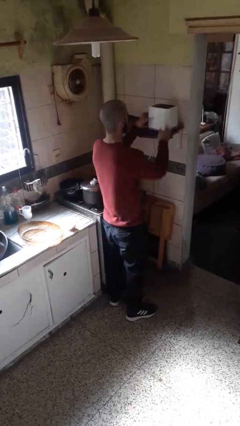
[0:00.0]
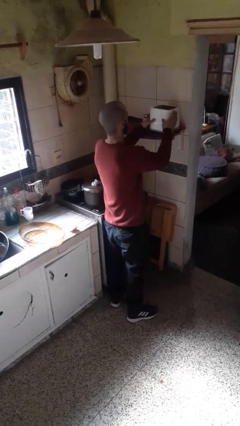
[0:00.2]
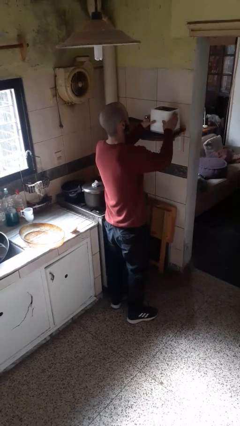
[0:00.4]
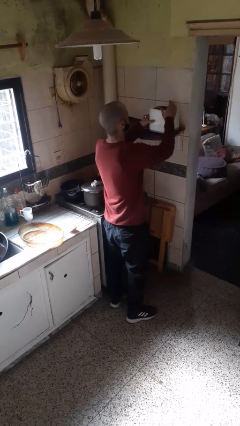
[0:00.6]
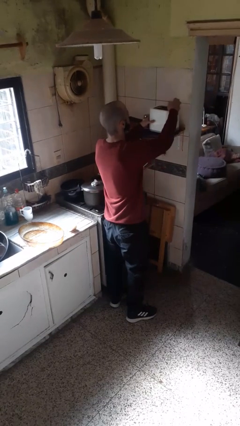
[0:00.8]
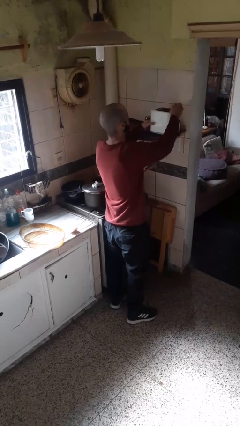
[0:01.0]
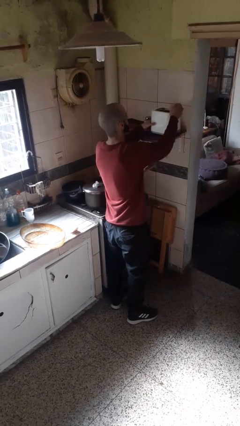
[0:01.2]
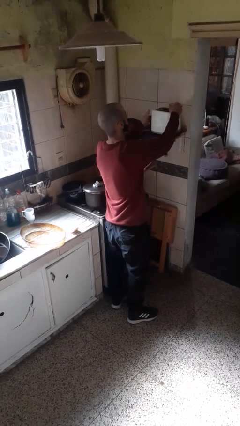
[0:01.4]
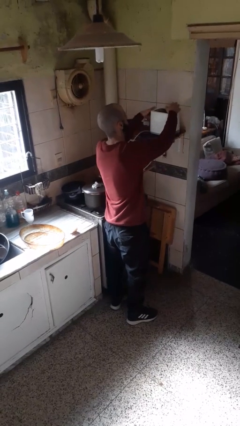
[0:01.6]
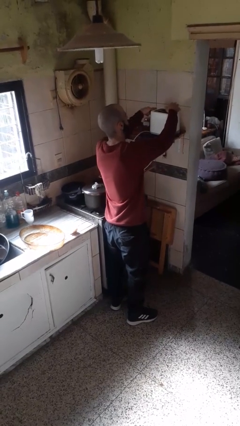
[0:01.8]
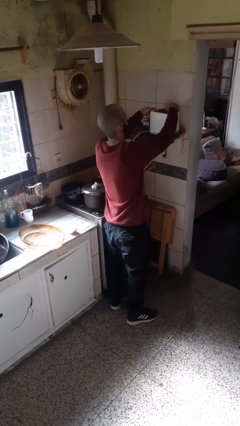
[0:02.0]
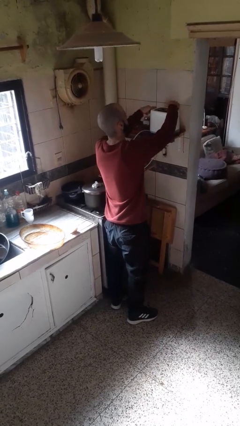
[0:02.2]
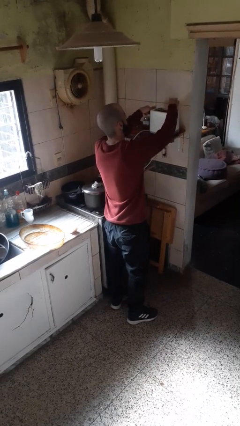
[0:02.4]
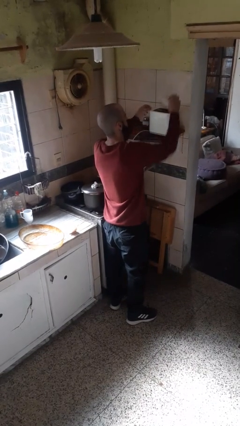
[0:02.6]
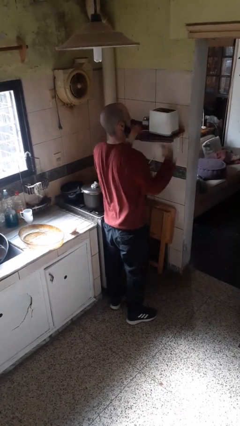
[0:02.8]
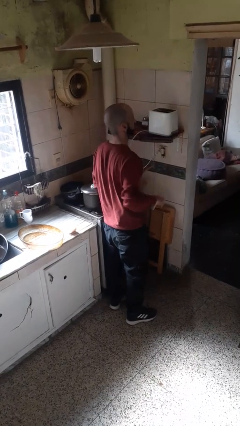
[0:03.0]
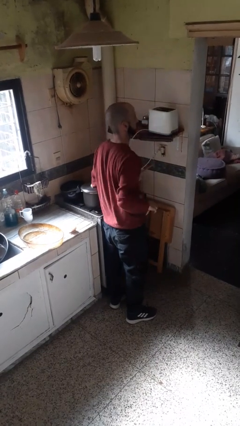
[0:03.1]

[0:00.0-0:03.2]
person takes object from toaster

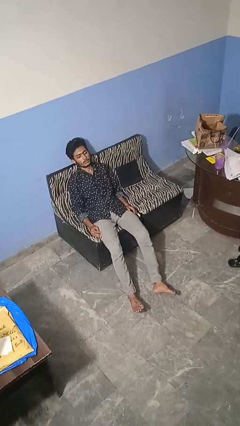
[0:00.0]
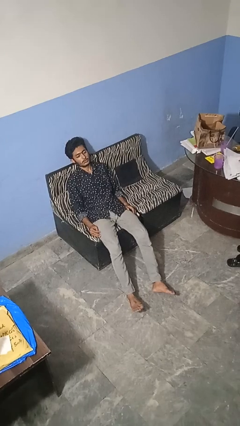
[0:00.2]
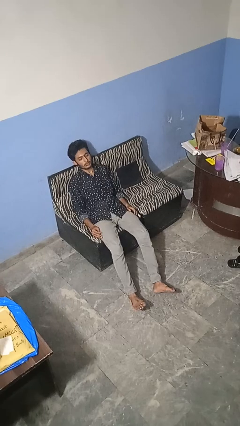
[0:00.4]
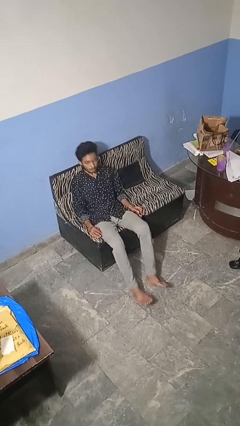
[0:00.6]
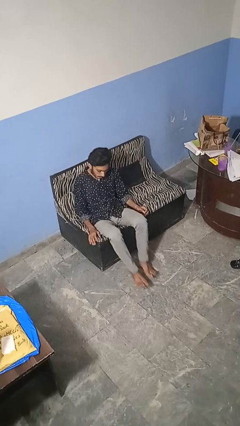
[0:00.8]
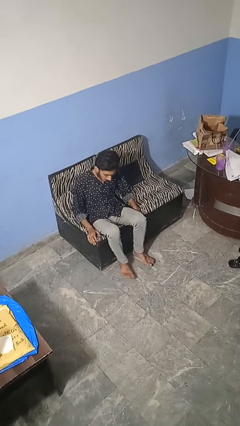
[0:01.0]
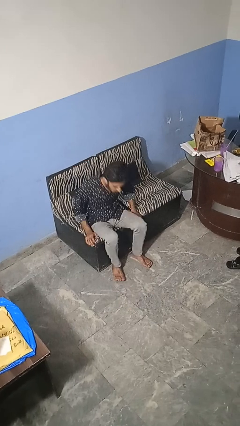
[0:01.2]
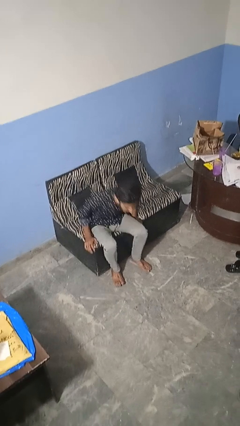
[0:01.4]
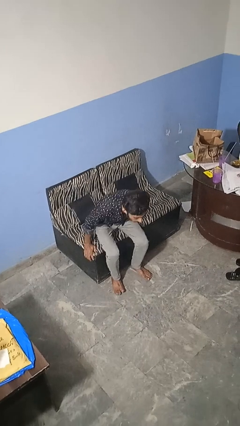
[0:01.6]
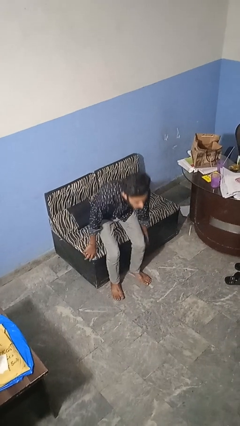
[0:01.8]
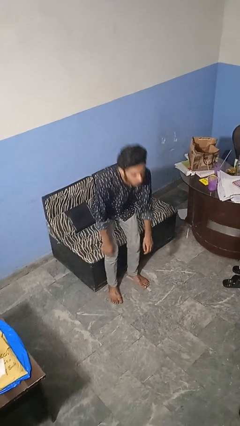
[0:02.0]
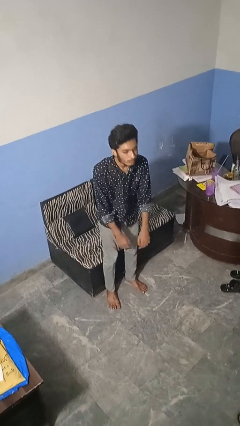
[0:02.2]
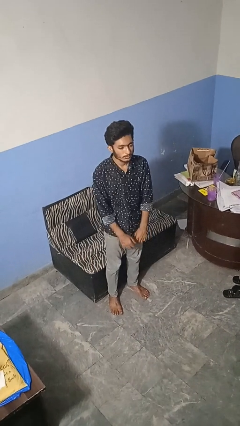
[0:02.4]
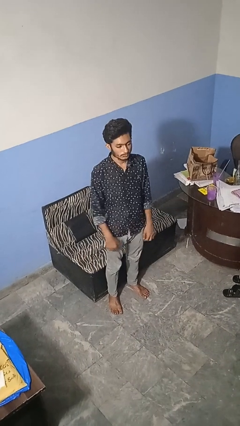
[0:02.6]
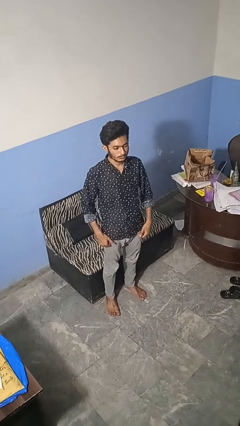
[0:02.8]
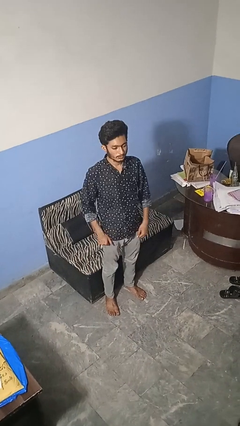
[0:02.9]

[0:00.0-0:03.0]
person stands up

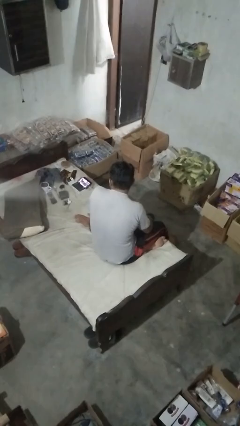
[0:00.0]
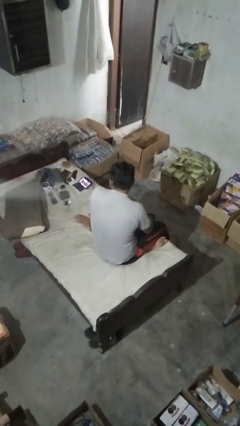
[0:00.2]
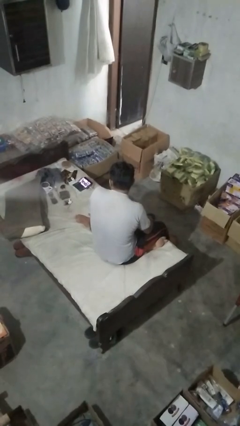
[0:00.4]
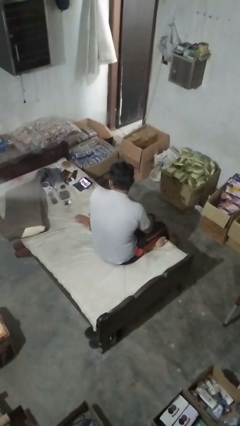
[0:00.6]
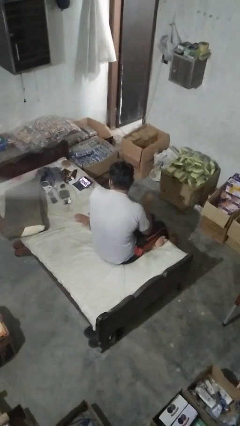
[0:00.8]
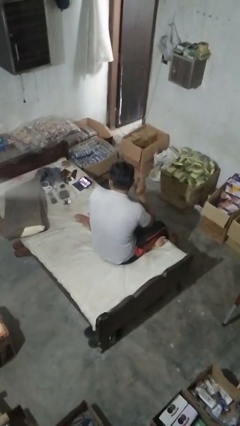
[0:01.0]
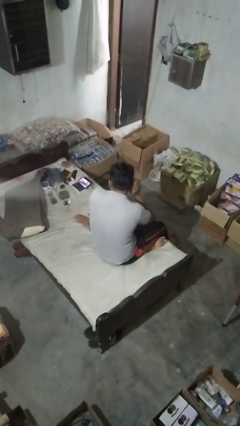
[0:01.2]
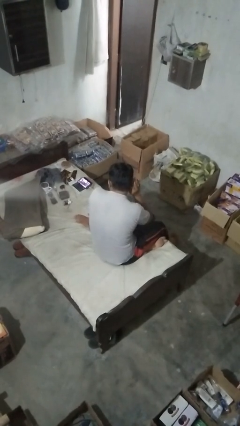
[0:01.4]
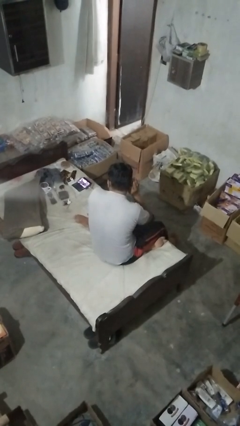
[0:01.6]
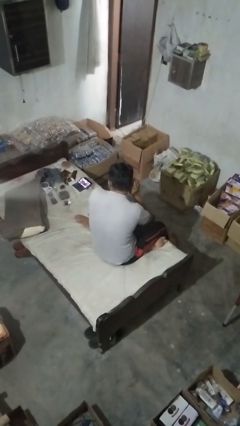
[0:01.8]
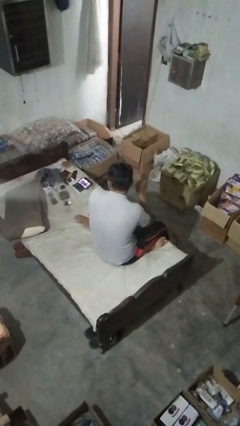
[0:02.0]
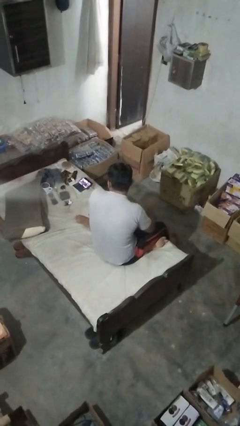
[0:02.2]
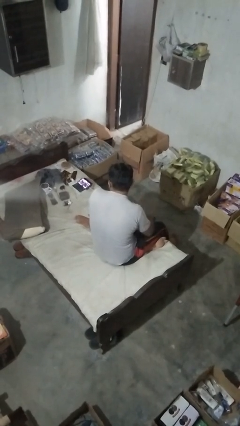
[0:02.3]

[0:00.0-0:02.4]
person gestures listen closely

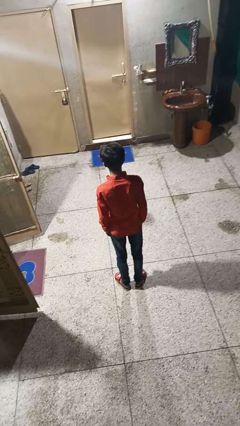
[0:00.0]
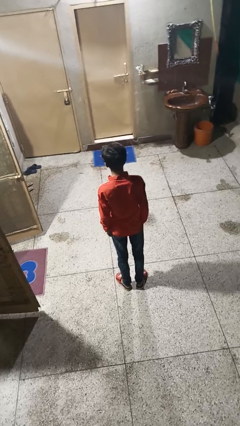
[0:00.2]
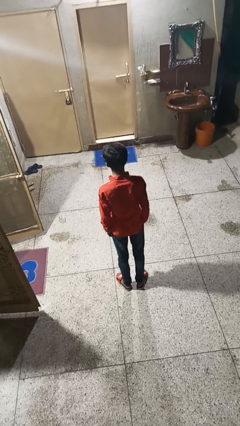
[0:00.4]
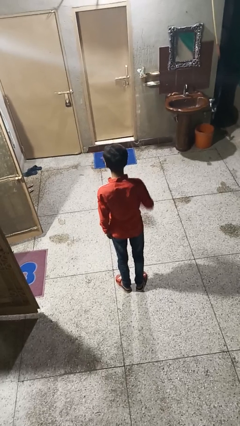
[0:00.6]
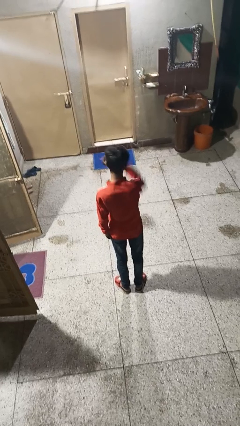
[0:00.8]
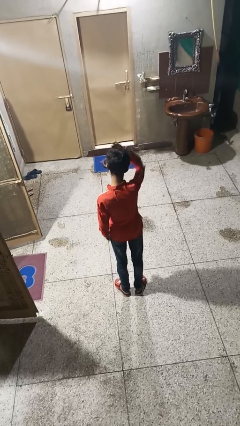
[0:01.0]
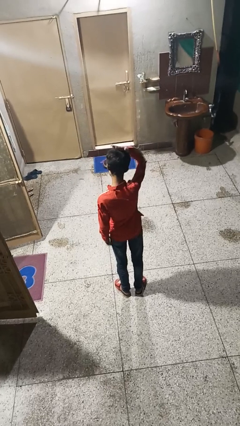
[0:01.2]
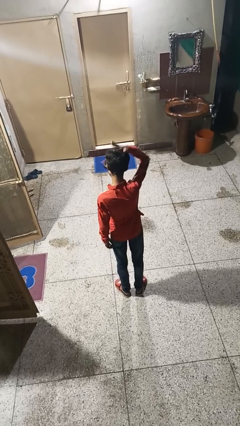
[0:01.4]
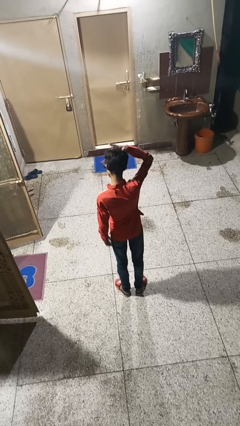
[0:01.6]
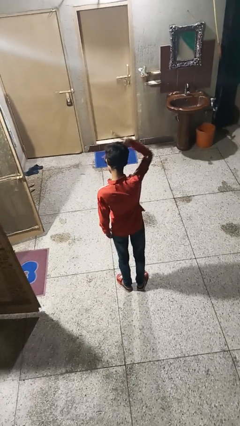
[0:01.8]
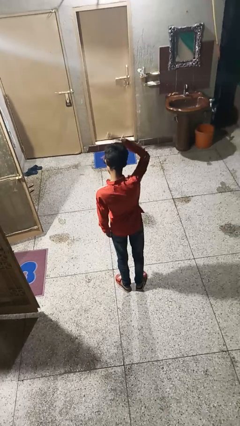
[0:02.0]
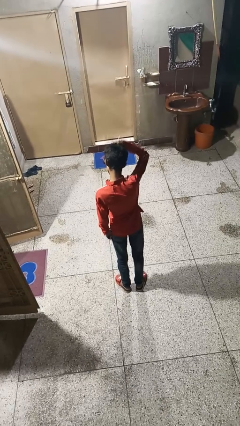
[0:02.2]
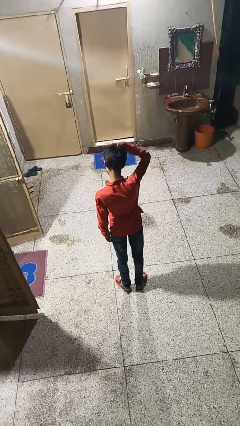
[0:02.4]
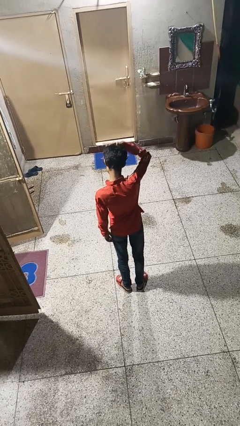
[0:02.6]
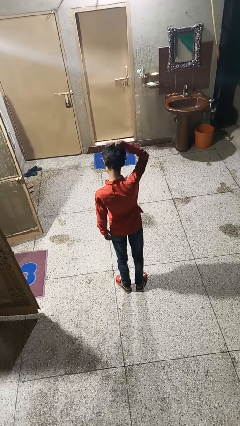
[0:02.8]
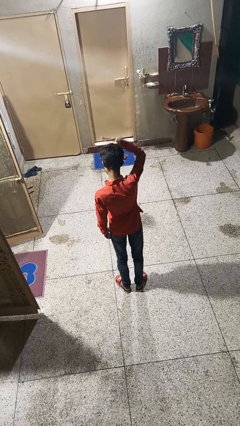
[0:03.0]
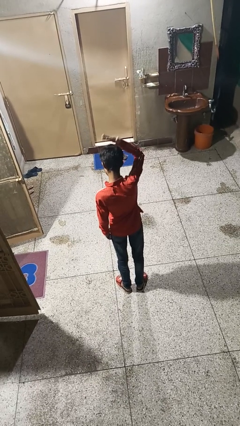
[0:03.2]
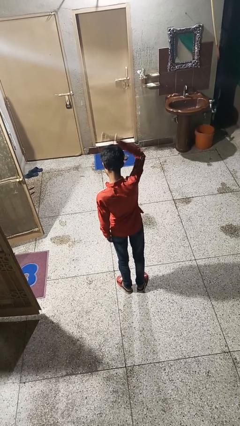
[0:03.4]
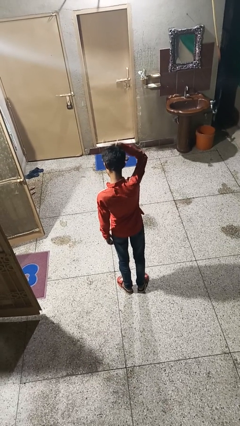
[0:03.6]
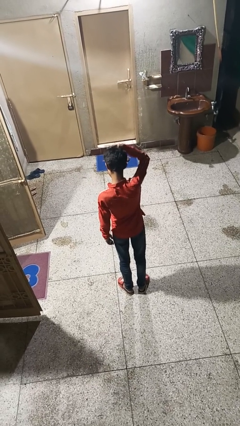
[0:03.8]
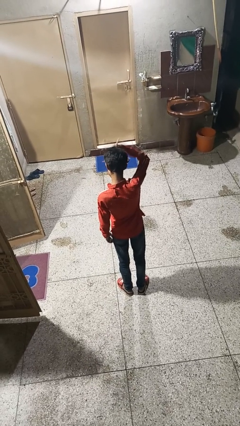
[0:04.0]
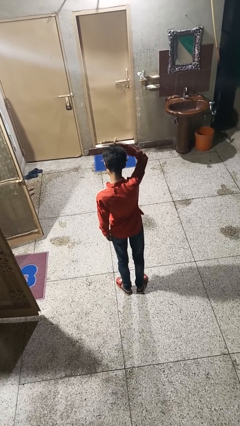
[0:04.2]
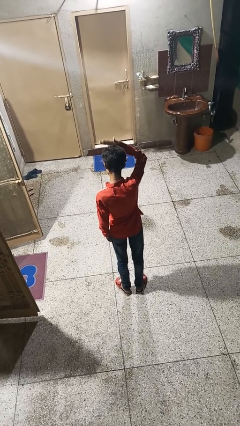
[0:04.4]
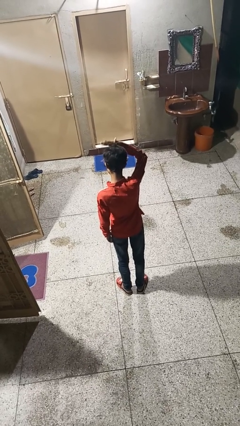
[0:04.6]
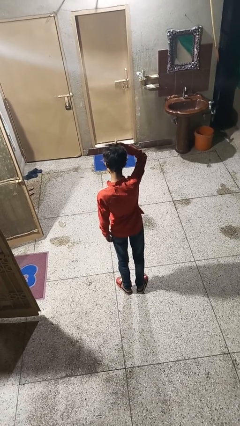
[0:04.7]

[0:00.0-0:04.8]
person pats head

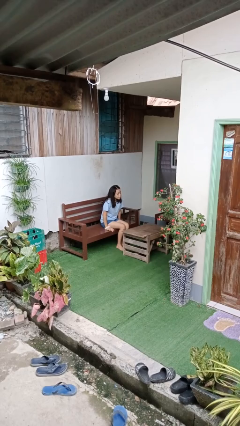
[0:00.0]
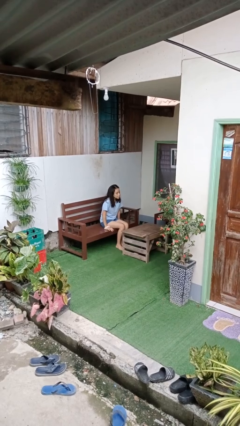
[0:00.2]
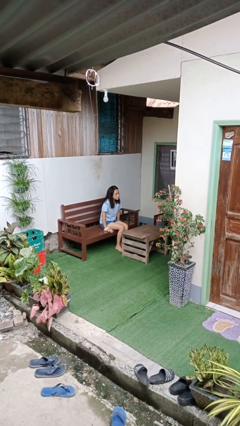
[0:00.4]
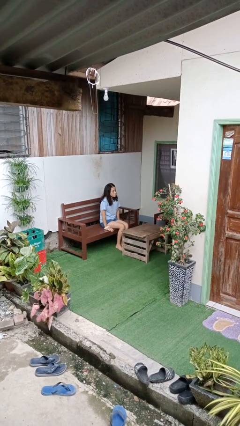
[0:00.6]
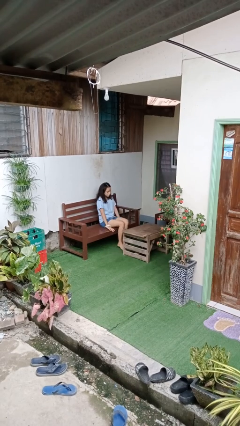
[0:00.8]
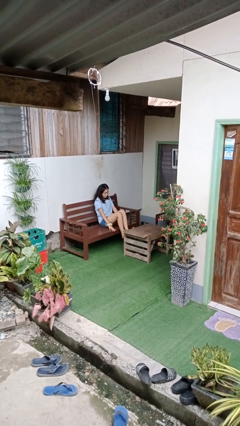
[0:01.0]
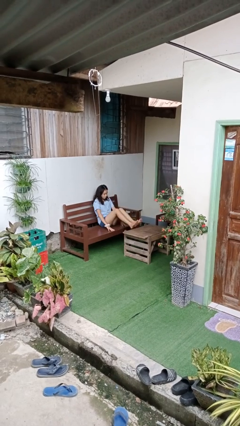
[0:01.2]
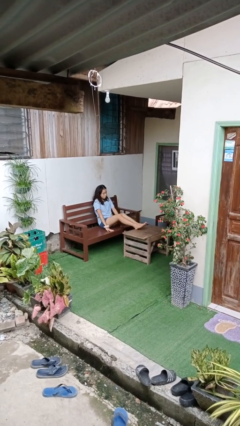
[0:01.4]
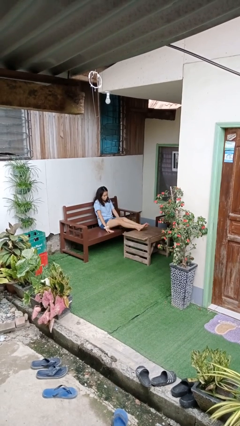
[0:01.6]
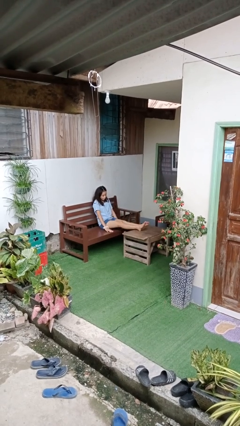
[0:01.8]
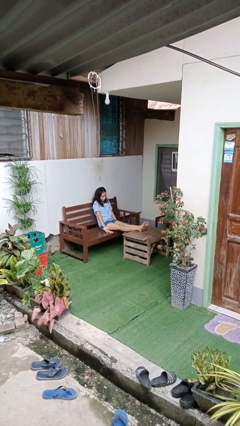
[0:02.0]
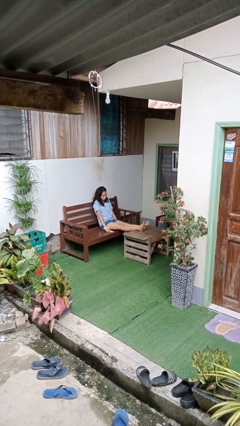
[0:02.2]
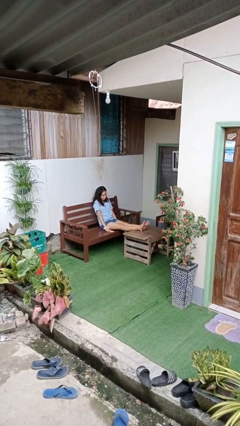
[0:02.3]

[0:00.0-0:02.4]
person puts feet up

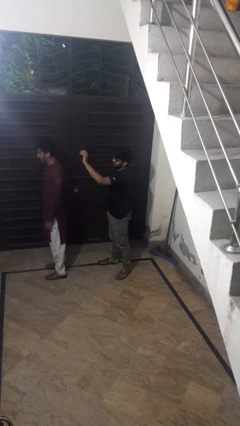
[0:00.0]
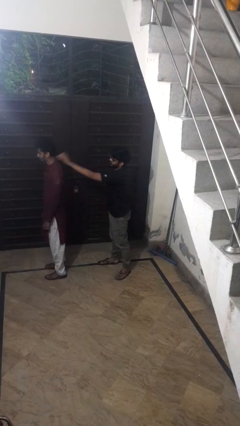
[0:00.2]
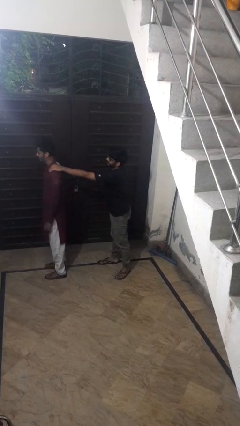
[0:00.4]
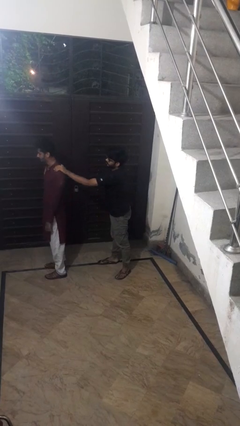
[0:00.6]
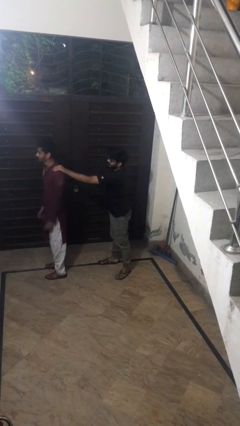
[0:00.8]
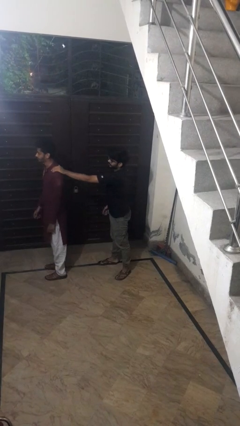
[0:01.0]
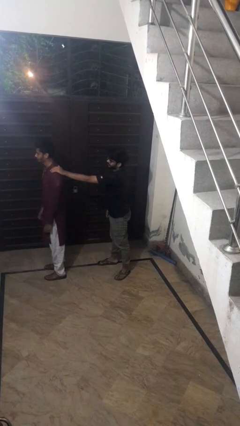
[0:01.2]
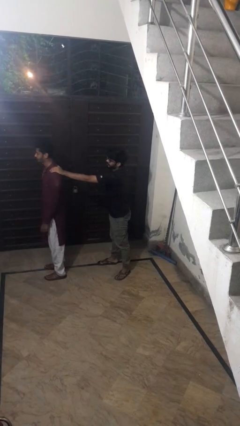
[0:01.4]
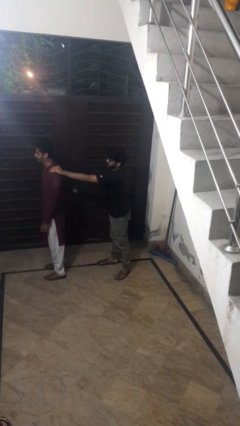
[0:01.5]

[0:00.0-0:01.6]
person grabs person by shoulder
